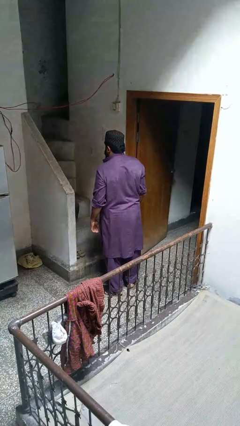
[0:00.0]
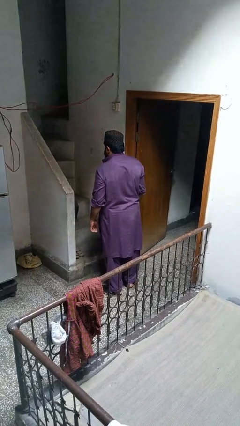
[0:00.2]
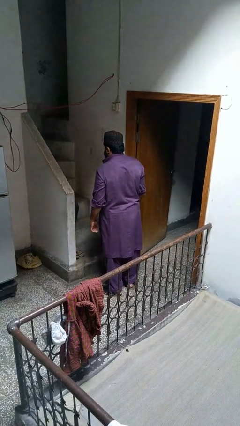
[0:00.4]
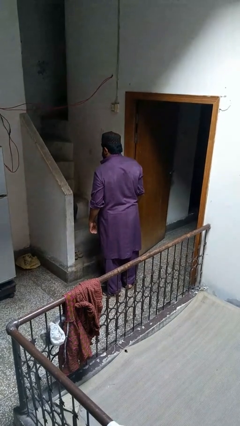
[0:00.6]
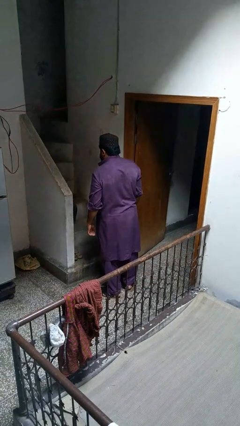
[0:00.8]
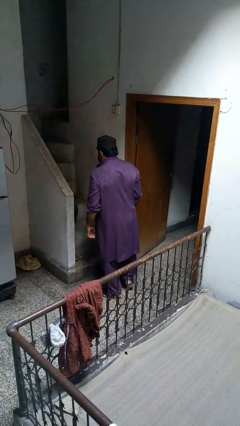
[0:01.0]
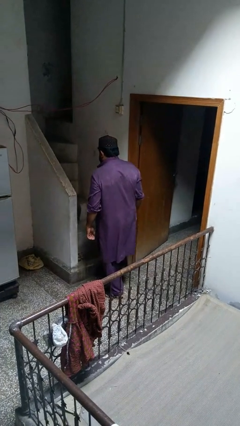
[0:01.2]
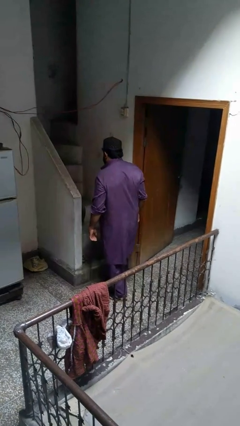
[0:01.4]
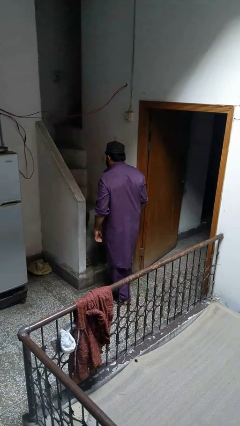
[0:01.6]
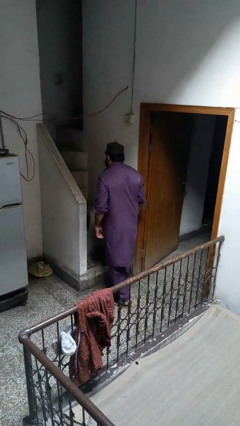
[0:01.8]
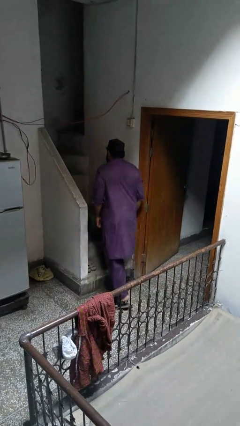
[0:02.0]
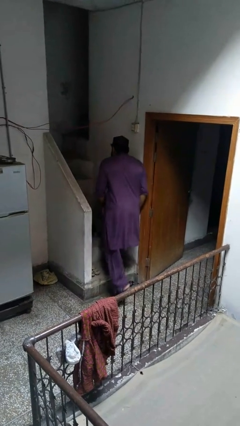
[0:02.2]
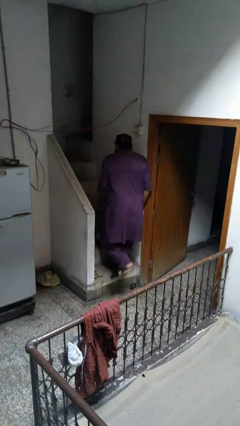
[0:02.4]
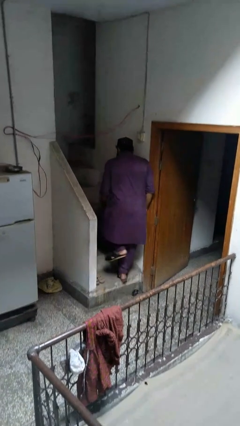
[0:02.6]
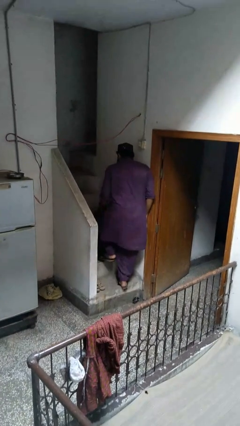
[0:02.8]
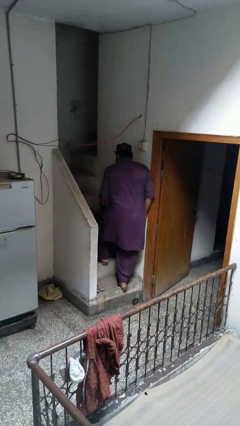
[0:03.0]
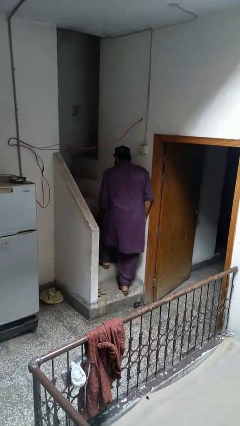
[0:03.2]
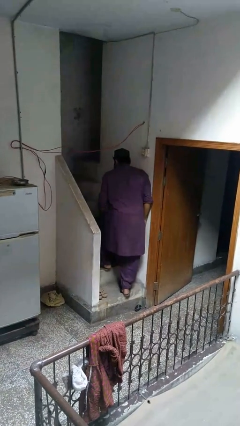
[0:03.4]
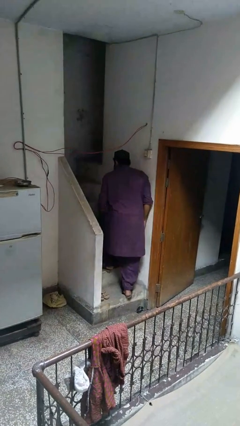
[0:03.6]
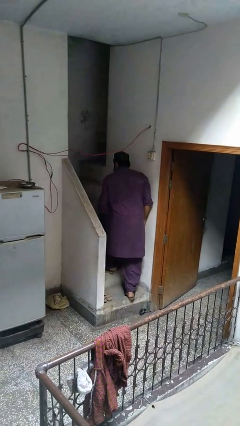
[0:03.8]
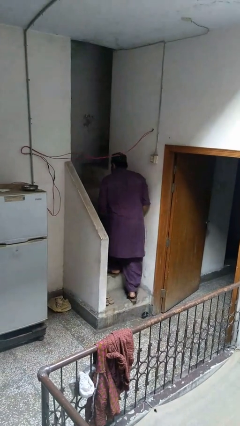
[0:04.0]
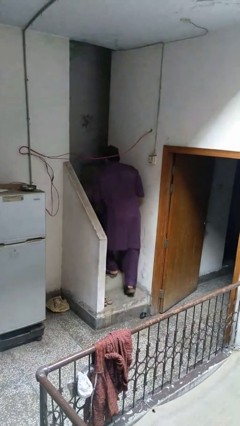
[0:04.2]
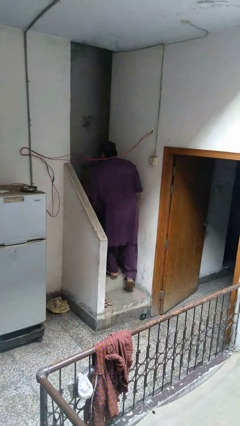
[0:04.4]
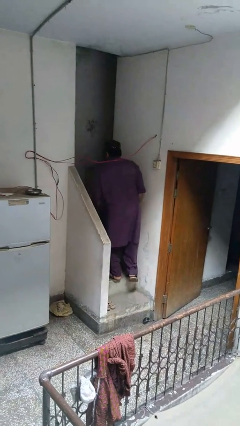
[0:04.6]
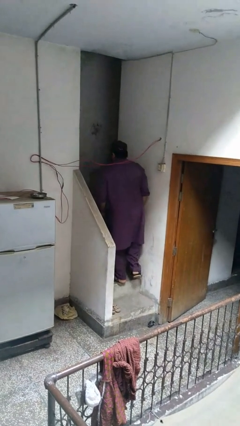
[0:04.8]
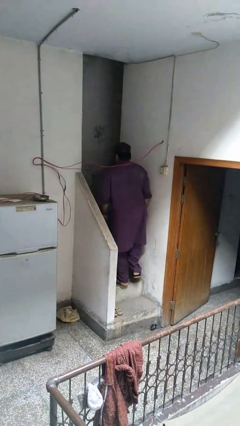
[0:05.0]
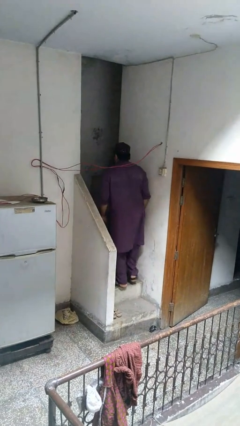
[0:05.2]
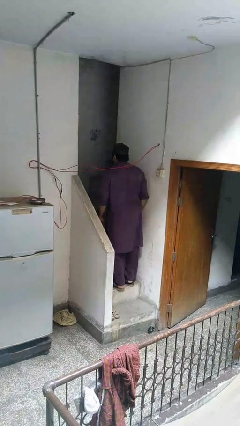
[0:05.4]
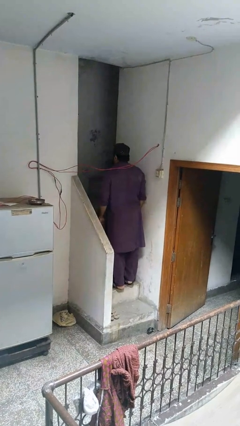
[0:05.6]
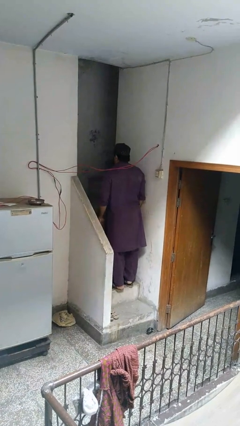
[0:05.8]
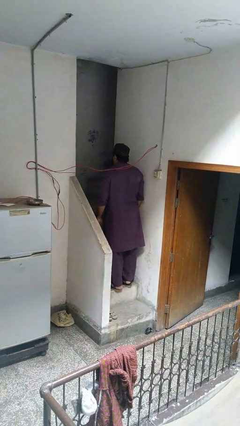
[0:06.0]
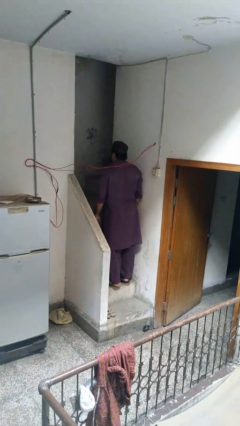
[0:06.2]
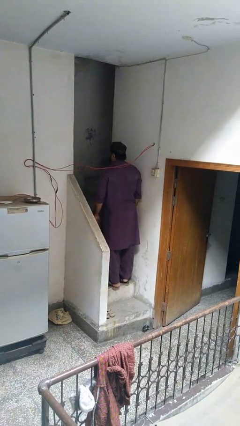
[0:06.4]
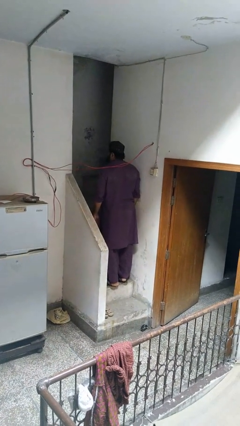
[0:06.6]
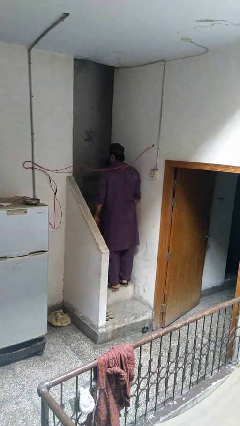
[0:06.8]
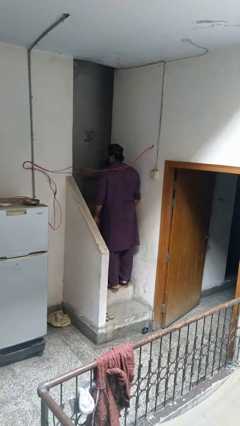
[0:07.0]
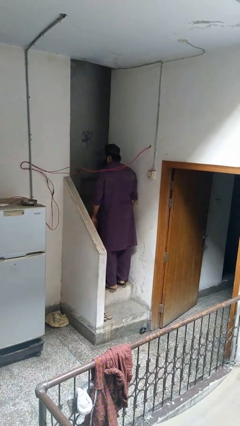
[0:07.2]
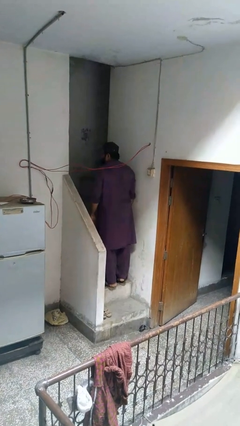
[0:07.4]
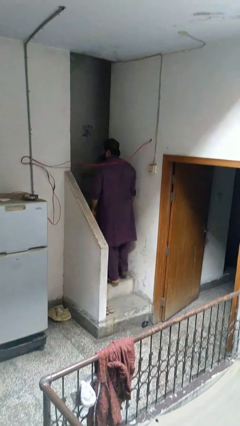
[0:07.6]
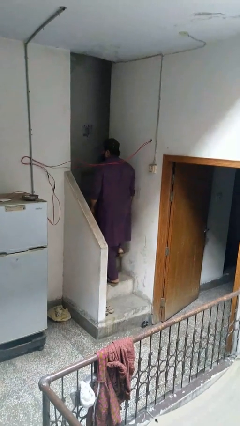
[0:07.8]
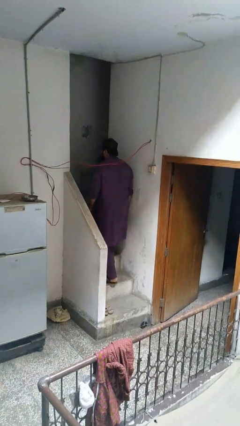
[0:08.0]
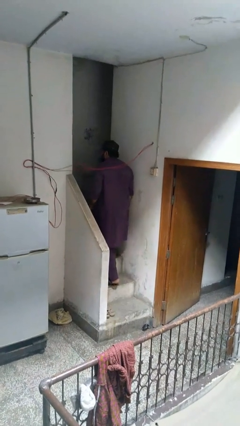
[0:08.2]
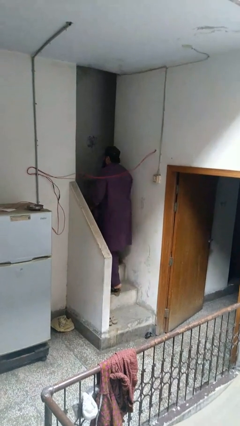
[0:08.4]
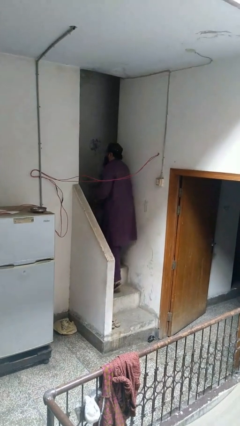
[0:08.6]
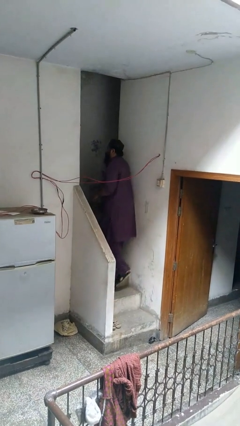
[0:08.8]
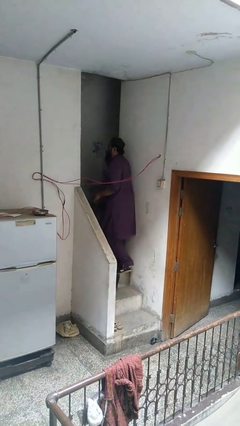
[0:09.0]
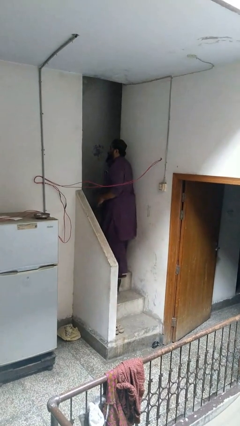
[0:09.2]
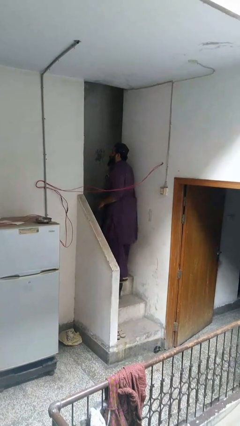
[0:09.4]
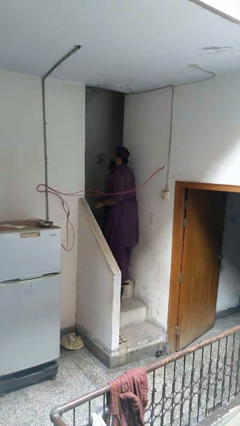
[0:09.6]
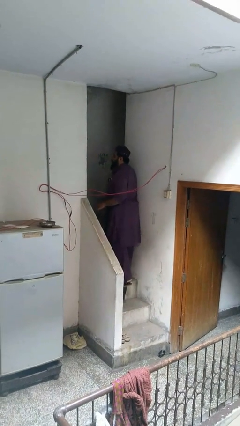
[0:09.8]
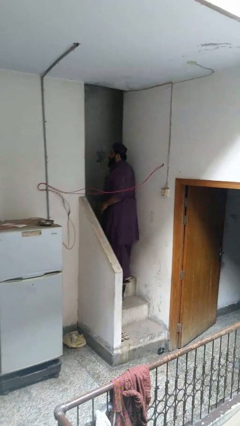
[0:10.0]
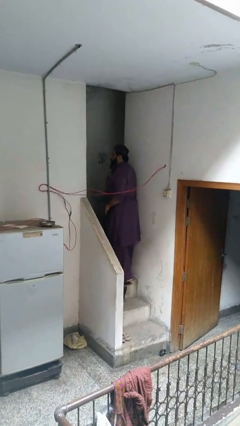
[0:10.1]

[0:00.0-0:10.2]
person climbs up stairs

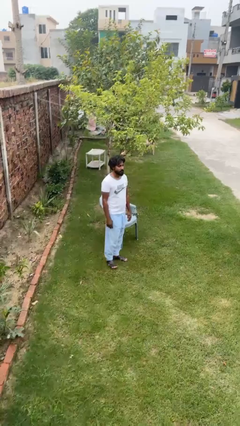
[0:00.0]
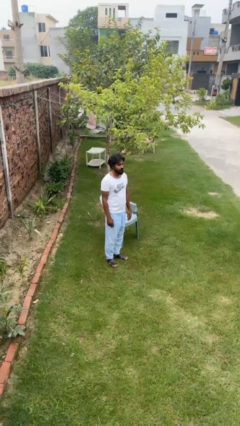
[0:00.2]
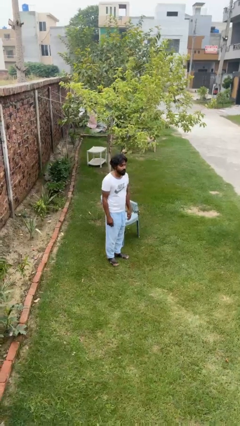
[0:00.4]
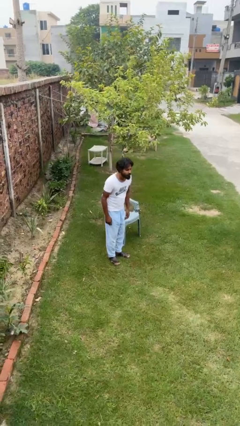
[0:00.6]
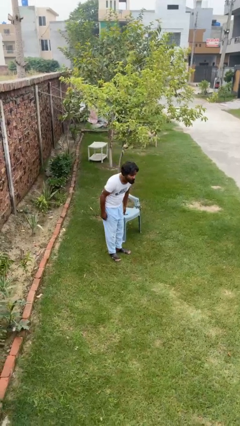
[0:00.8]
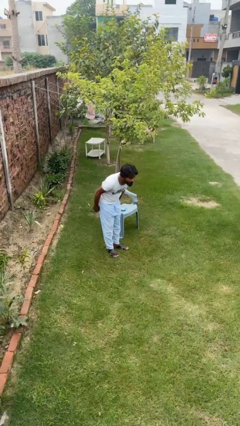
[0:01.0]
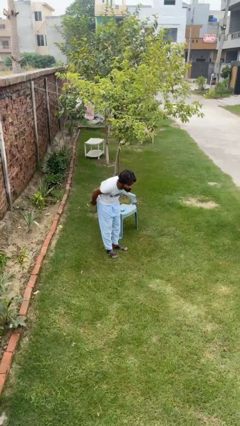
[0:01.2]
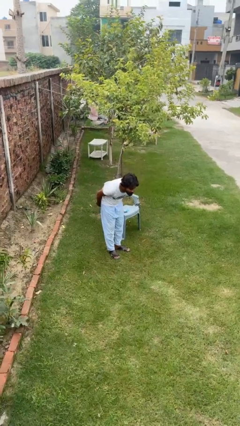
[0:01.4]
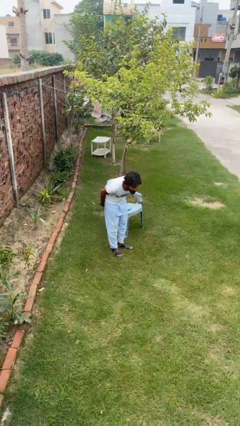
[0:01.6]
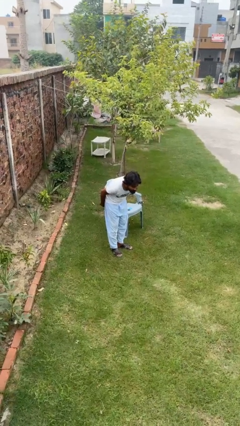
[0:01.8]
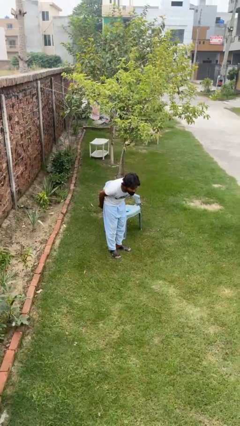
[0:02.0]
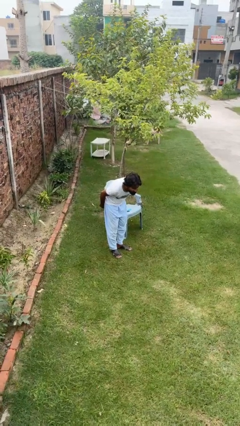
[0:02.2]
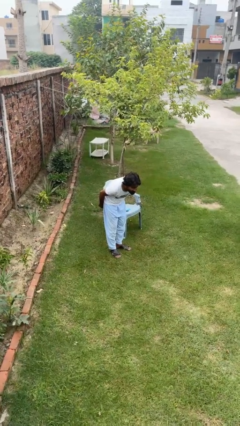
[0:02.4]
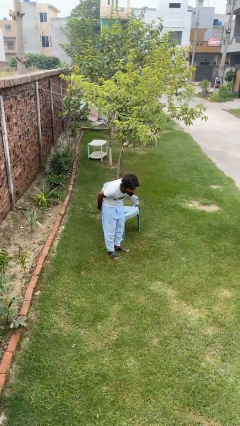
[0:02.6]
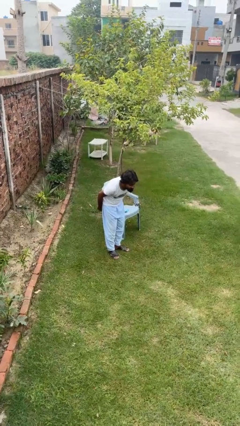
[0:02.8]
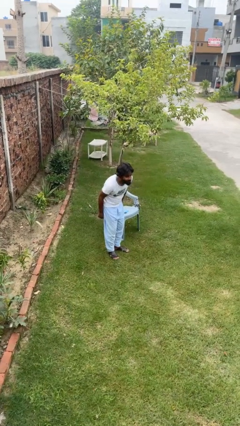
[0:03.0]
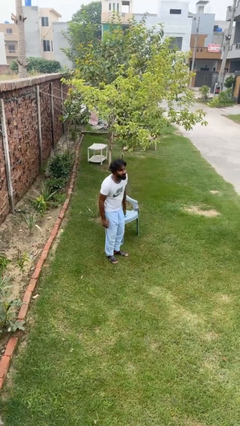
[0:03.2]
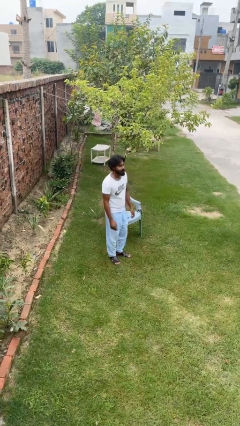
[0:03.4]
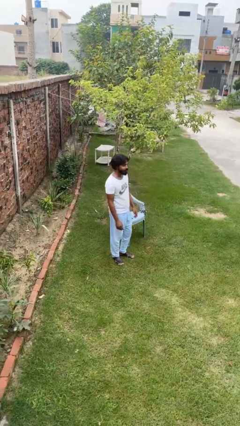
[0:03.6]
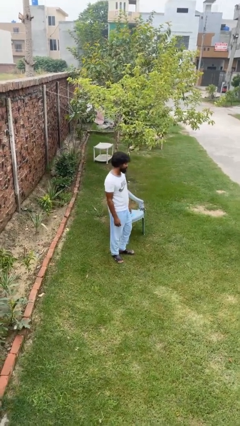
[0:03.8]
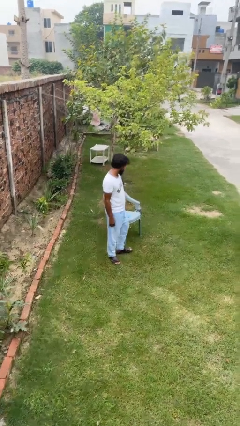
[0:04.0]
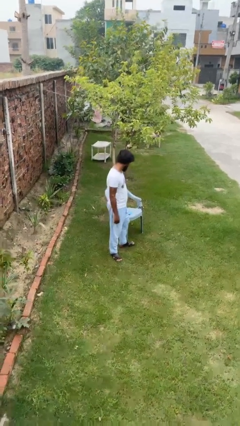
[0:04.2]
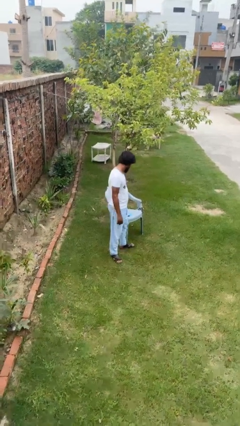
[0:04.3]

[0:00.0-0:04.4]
person bows

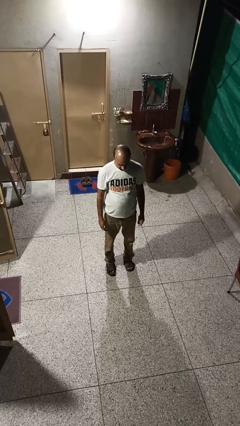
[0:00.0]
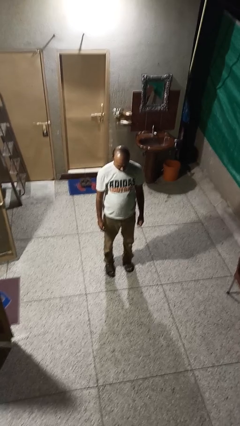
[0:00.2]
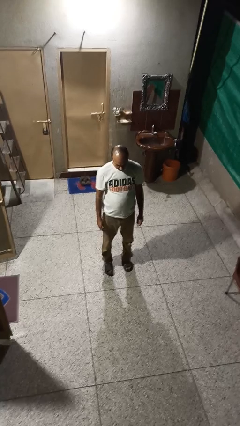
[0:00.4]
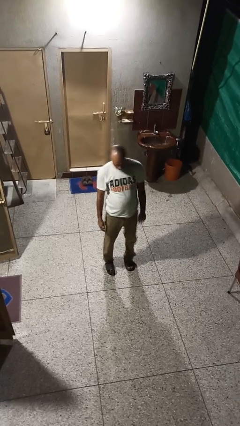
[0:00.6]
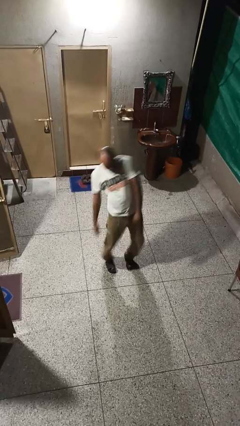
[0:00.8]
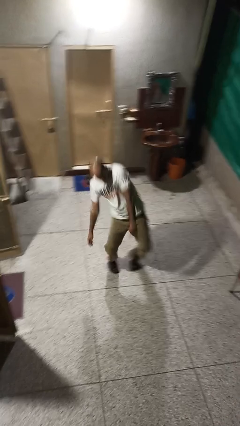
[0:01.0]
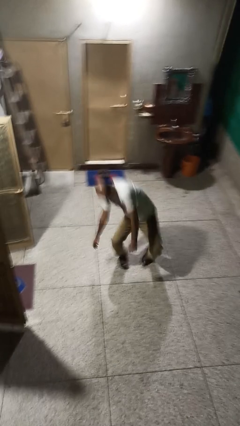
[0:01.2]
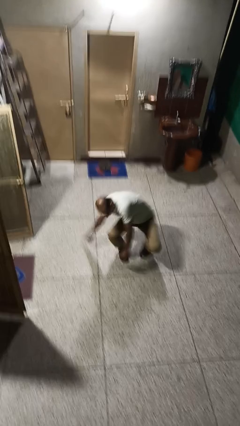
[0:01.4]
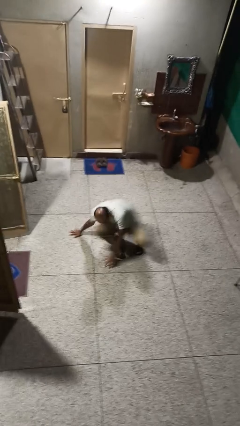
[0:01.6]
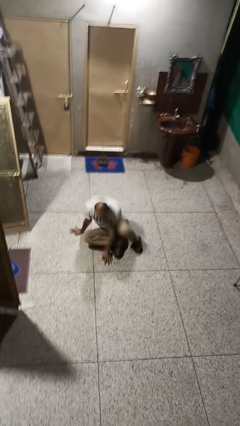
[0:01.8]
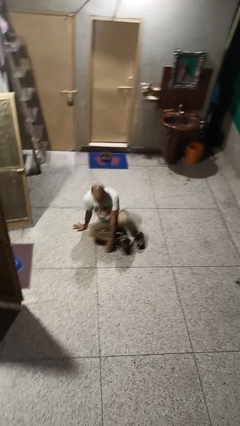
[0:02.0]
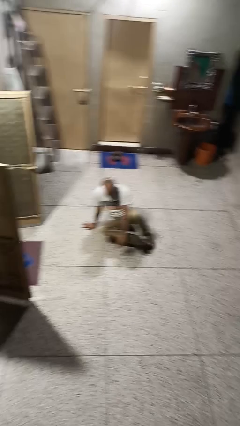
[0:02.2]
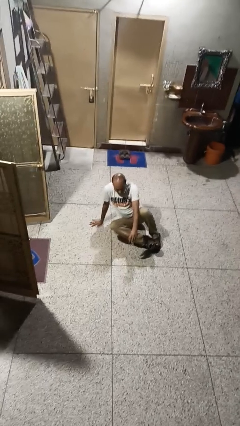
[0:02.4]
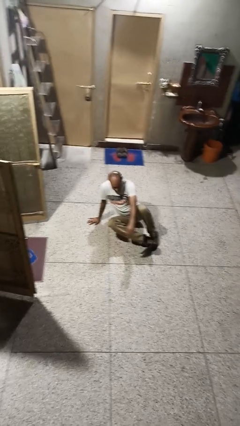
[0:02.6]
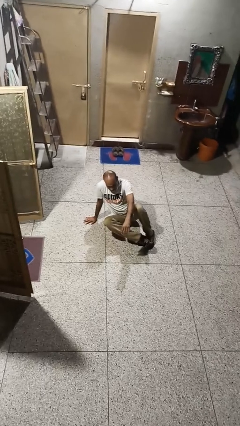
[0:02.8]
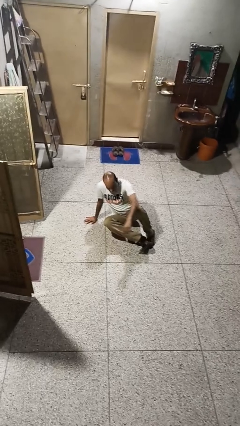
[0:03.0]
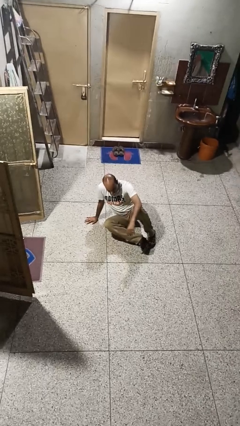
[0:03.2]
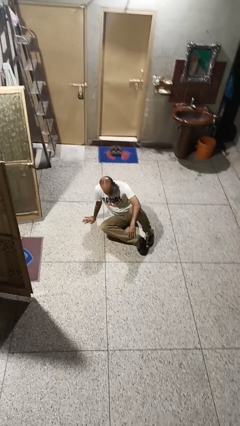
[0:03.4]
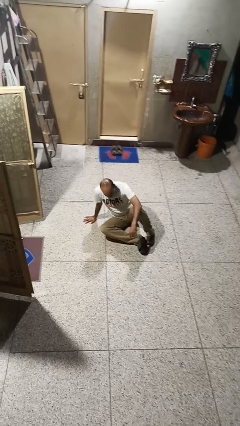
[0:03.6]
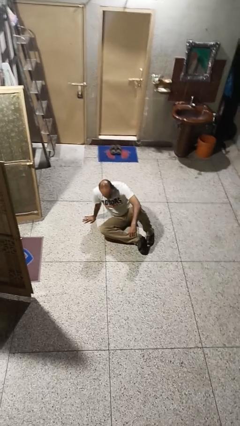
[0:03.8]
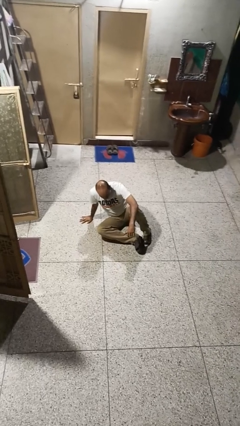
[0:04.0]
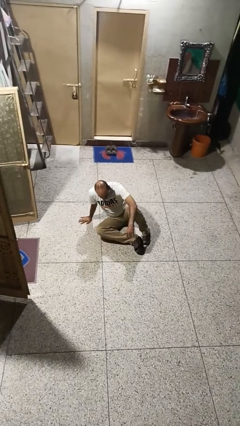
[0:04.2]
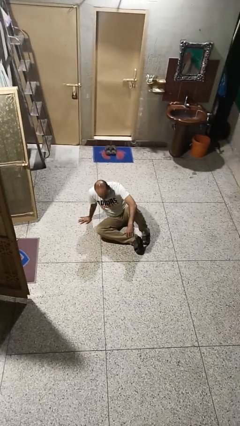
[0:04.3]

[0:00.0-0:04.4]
person falls while standing
